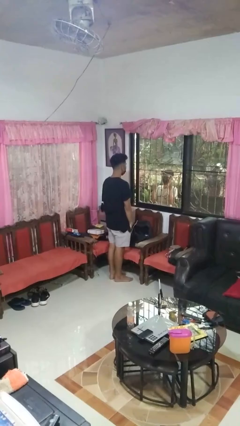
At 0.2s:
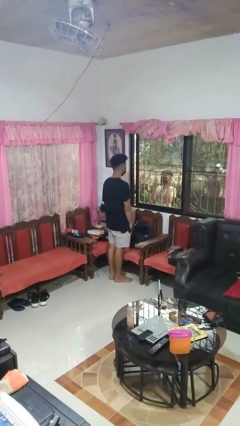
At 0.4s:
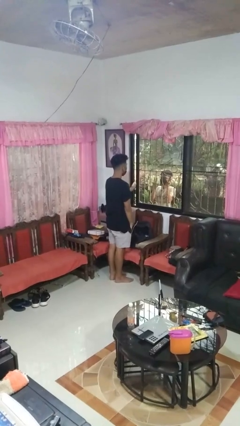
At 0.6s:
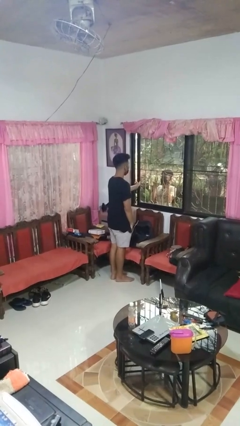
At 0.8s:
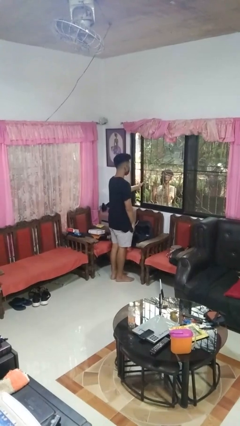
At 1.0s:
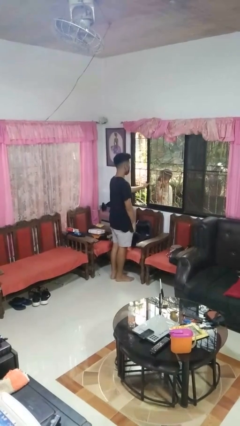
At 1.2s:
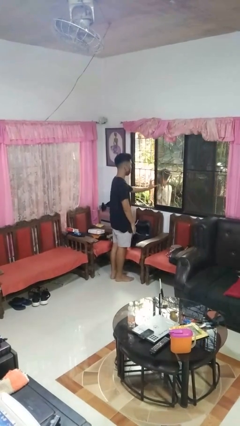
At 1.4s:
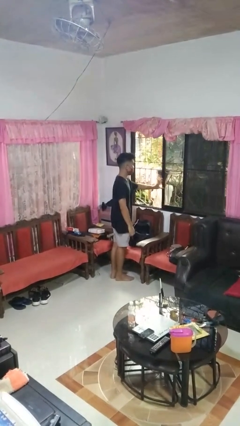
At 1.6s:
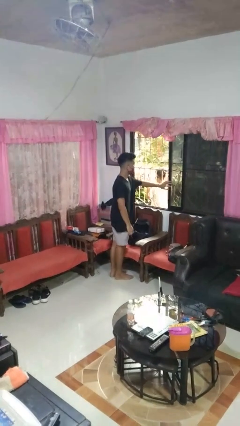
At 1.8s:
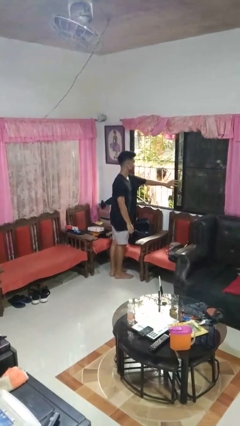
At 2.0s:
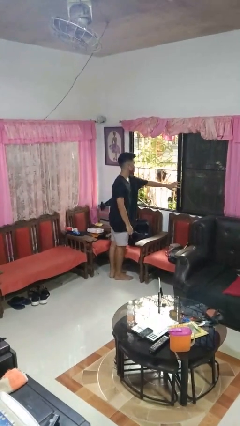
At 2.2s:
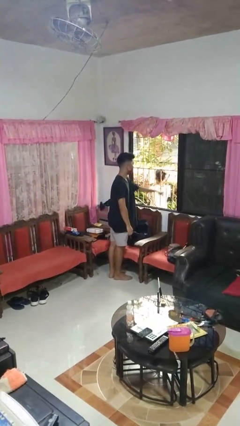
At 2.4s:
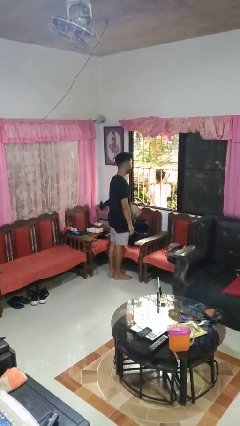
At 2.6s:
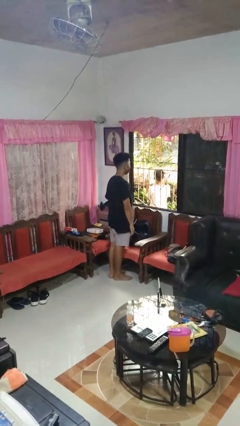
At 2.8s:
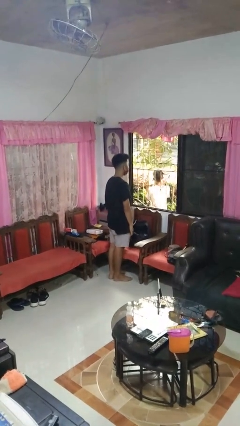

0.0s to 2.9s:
person opens home window

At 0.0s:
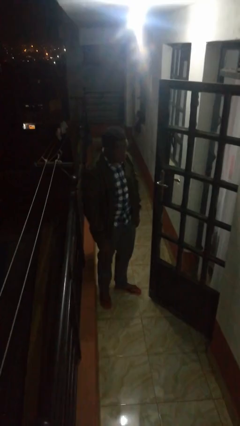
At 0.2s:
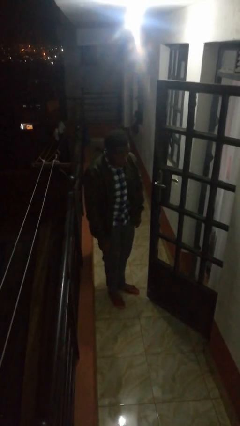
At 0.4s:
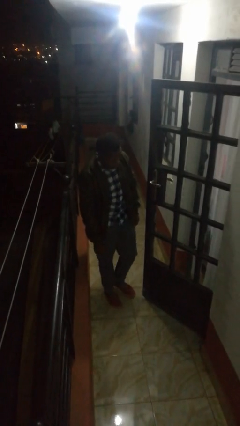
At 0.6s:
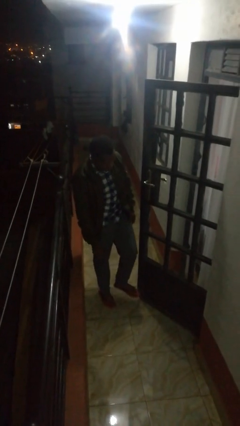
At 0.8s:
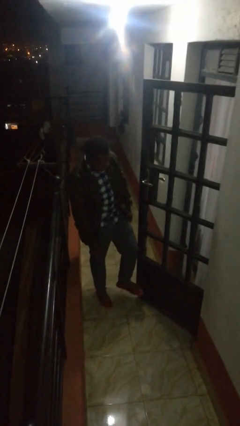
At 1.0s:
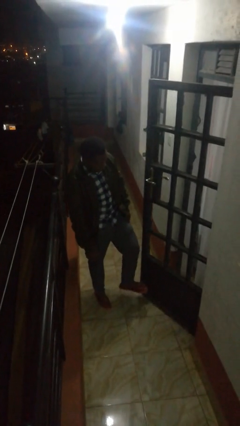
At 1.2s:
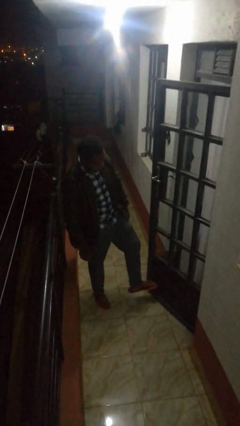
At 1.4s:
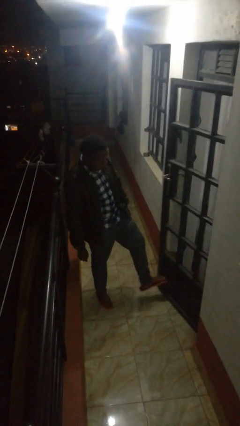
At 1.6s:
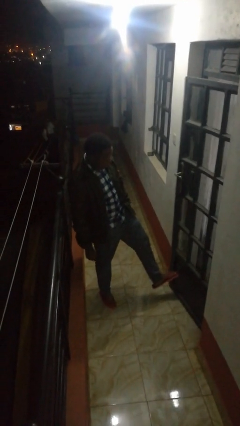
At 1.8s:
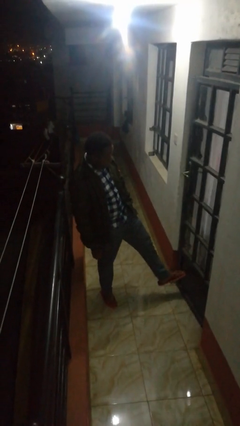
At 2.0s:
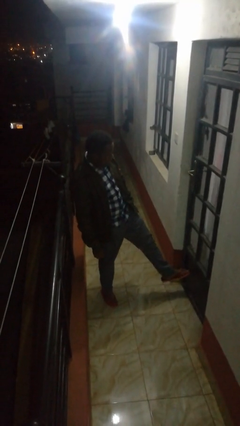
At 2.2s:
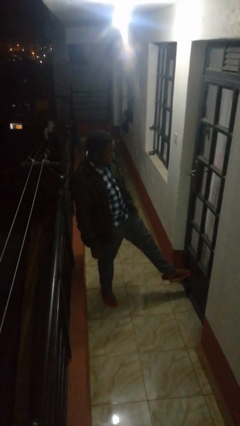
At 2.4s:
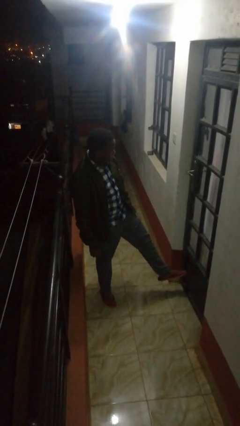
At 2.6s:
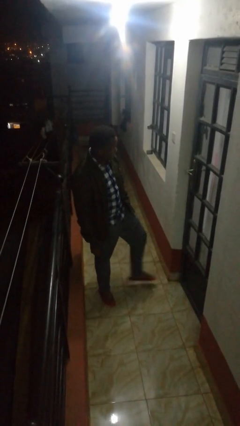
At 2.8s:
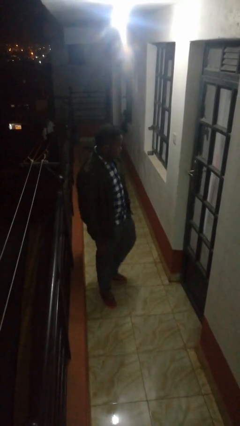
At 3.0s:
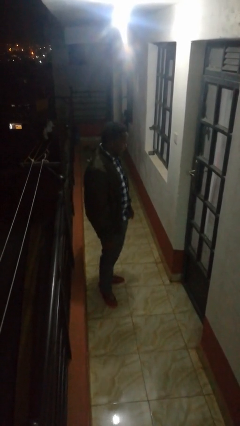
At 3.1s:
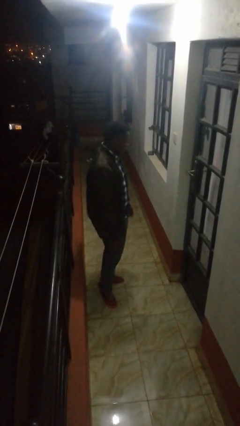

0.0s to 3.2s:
person closes door with foot

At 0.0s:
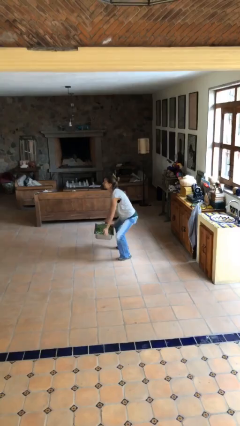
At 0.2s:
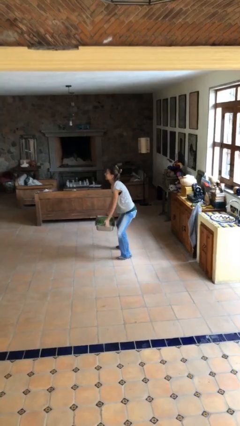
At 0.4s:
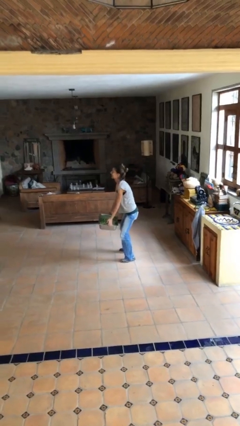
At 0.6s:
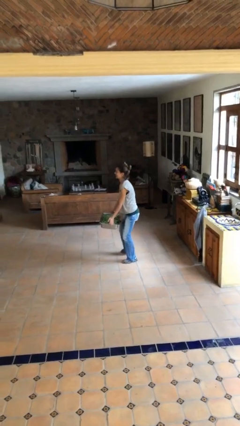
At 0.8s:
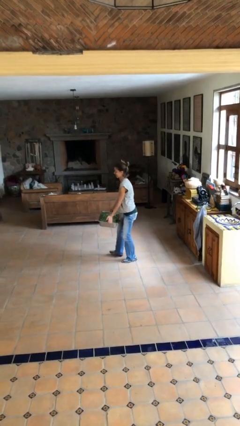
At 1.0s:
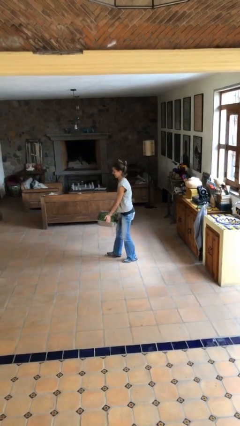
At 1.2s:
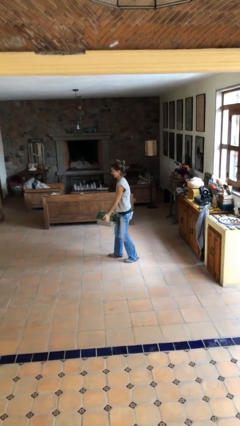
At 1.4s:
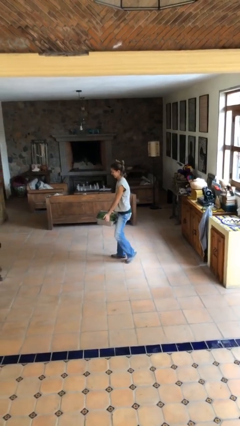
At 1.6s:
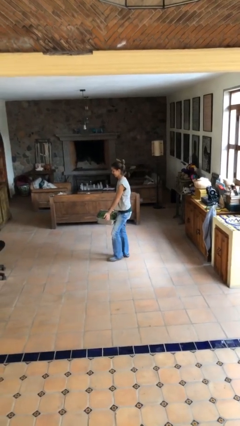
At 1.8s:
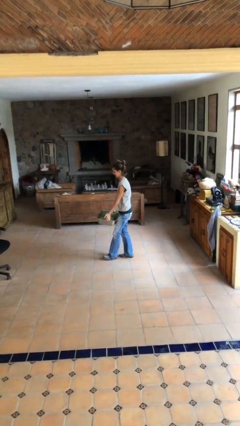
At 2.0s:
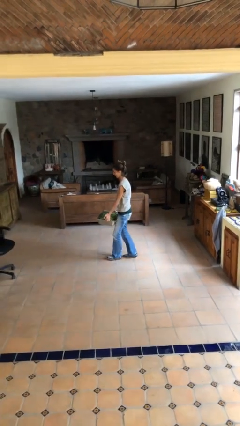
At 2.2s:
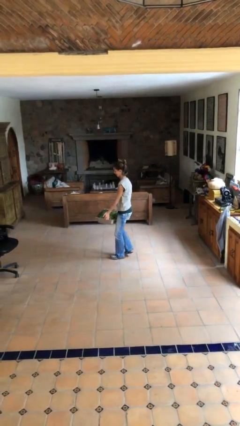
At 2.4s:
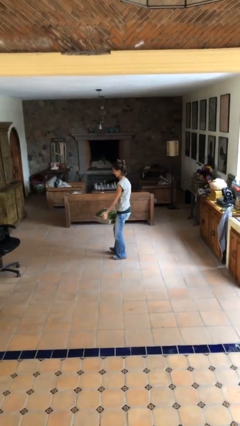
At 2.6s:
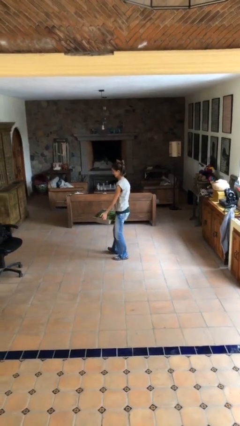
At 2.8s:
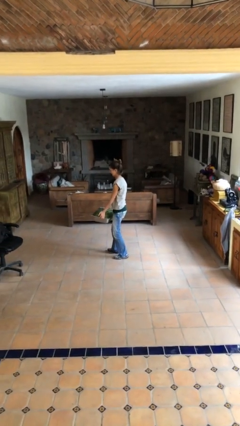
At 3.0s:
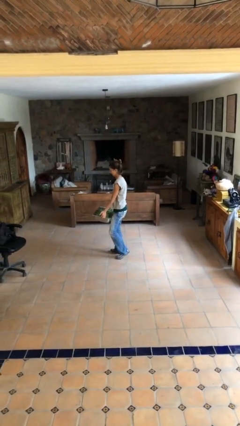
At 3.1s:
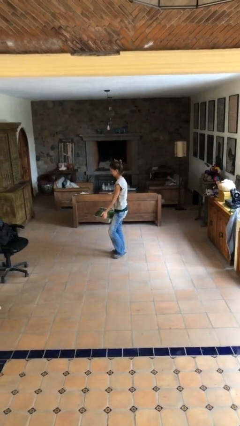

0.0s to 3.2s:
person carries heavy object

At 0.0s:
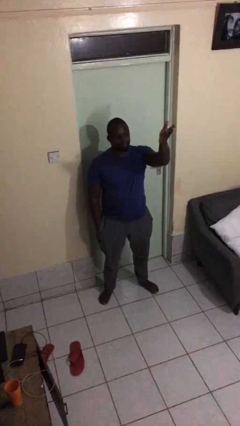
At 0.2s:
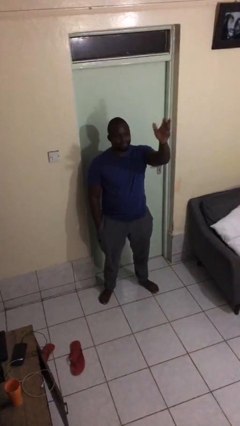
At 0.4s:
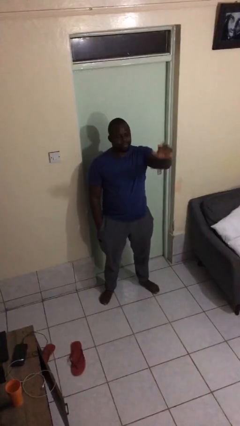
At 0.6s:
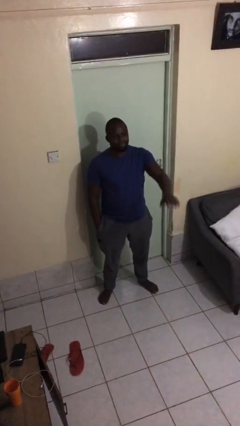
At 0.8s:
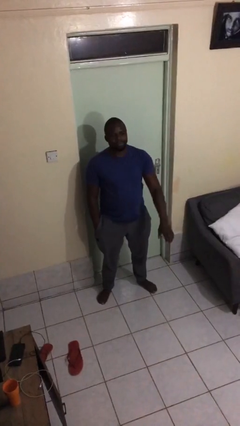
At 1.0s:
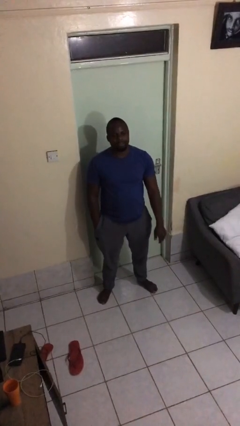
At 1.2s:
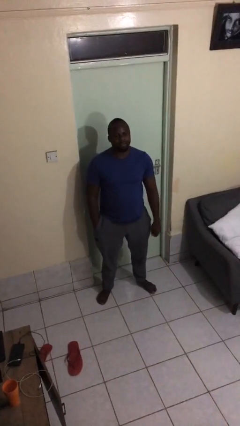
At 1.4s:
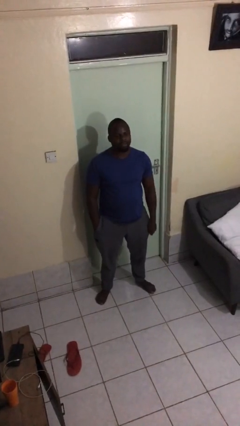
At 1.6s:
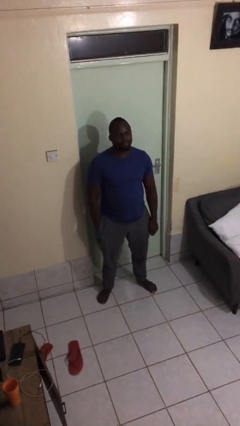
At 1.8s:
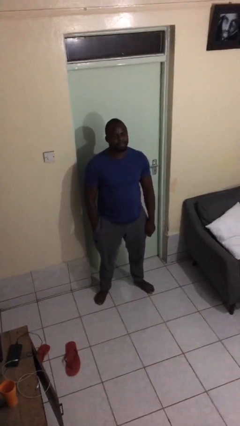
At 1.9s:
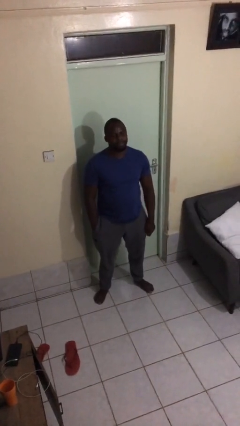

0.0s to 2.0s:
person gestures swipe down

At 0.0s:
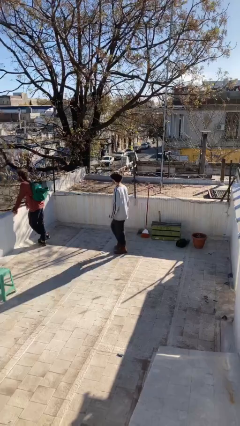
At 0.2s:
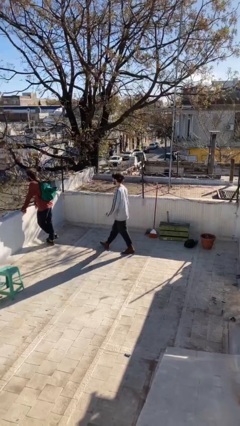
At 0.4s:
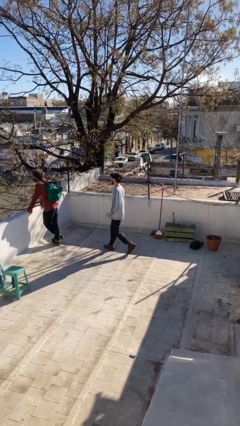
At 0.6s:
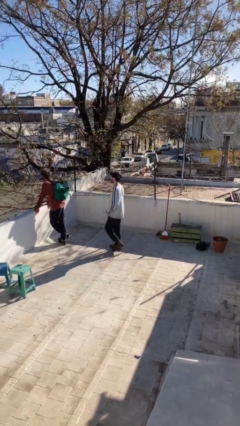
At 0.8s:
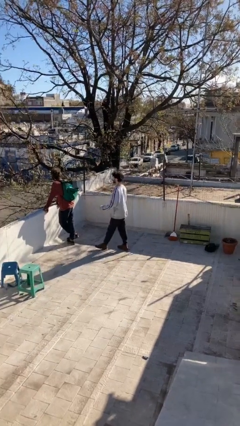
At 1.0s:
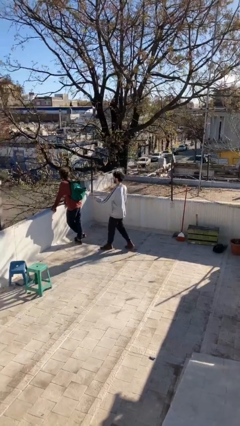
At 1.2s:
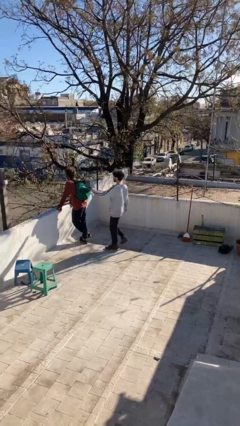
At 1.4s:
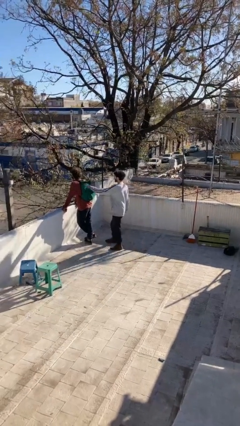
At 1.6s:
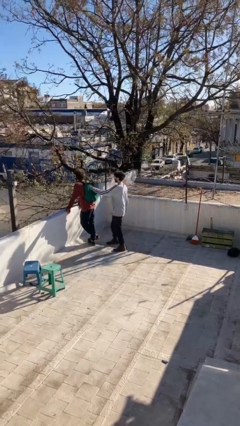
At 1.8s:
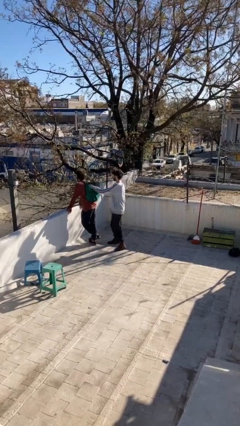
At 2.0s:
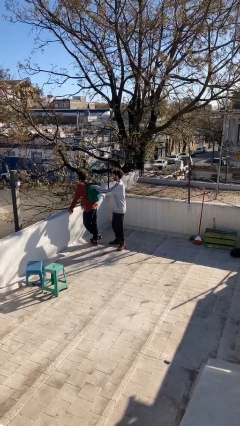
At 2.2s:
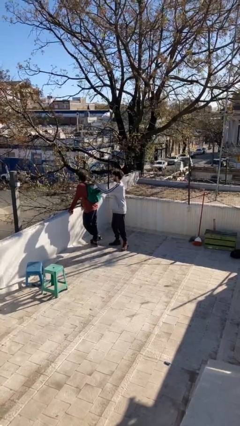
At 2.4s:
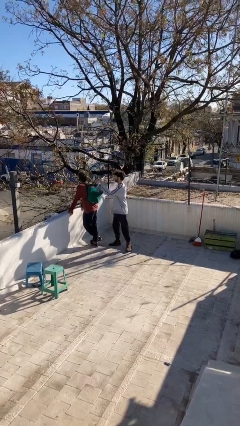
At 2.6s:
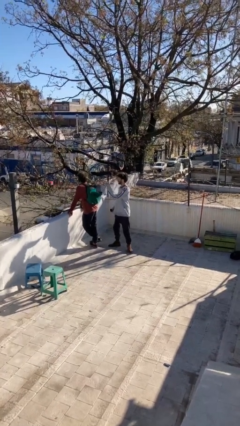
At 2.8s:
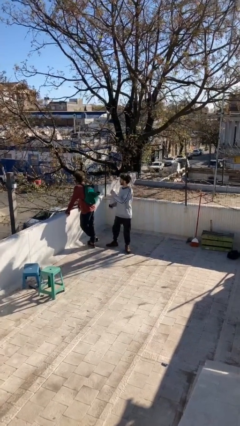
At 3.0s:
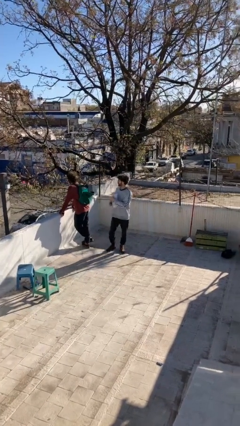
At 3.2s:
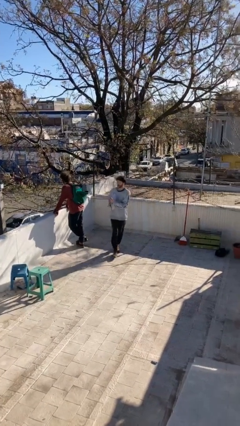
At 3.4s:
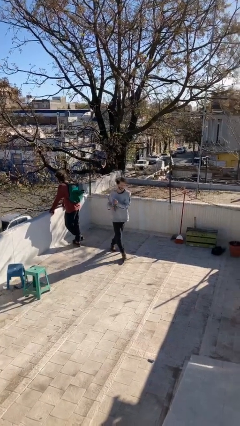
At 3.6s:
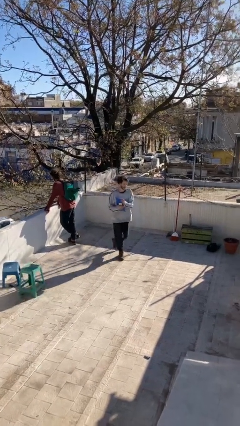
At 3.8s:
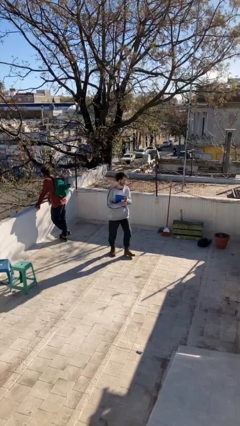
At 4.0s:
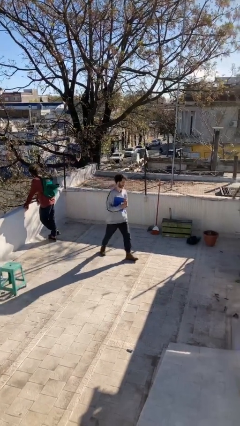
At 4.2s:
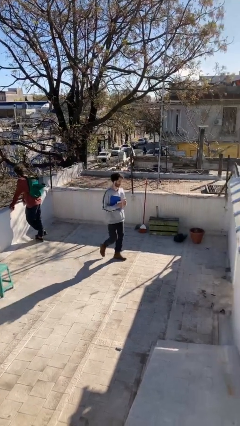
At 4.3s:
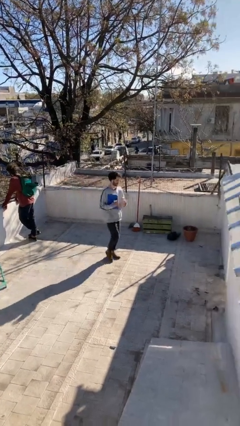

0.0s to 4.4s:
person steals object from person

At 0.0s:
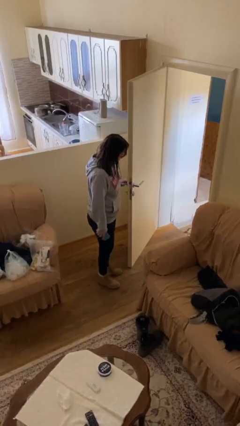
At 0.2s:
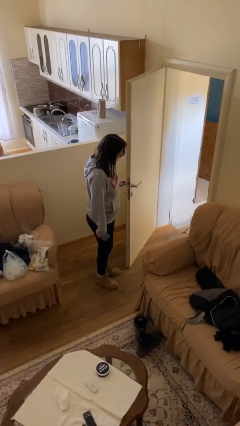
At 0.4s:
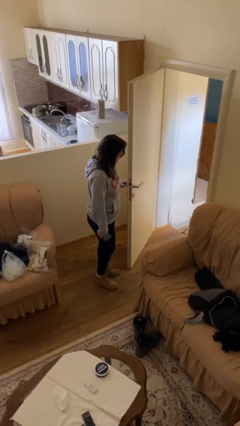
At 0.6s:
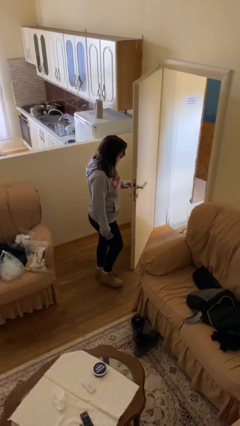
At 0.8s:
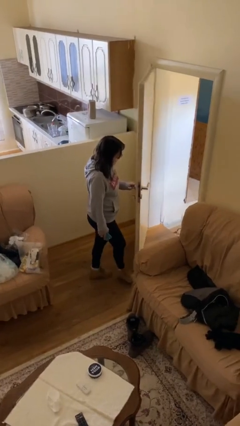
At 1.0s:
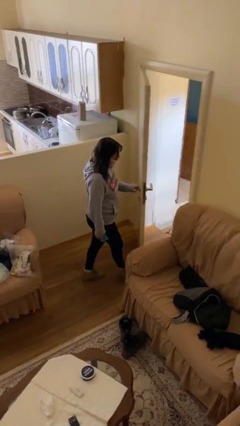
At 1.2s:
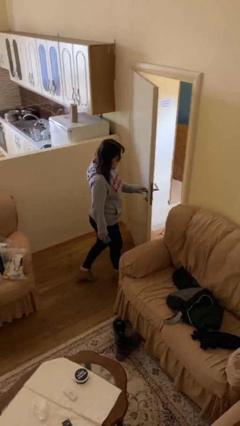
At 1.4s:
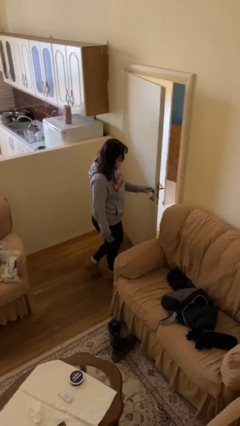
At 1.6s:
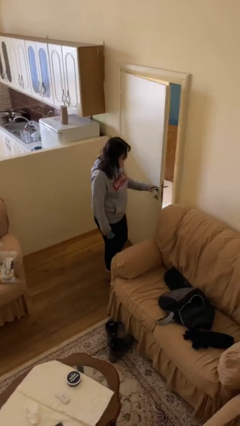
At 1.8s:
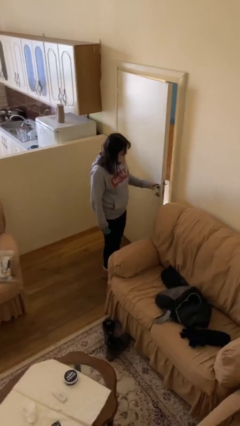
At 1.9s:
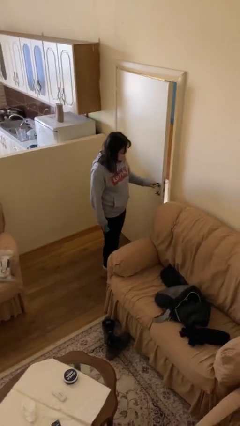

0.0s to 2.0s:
person closes facility door
